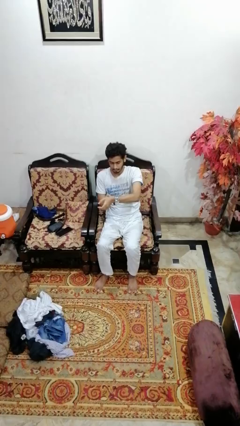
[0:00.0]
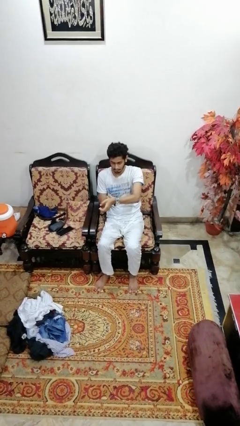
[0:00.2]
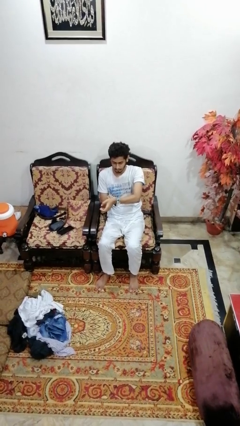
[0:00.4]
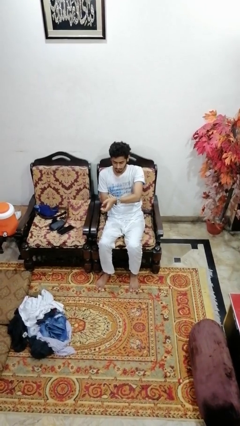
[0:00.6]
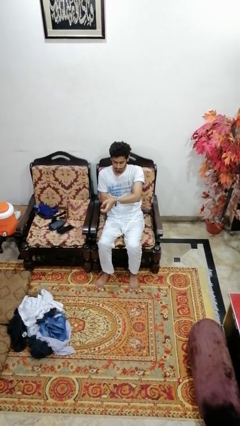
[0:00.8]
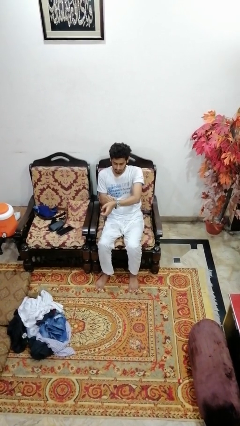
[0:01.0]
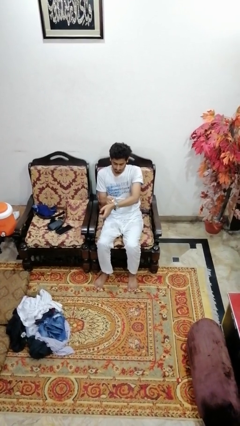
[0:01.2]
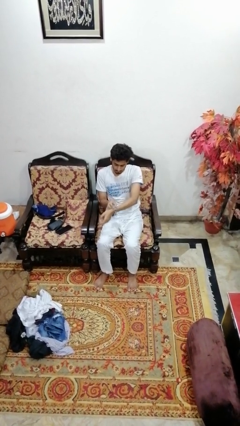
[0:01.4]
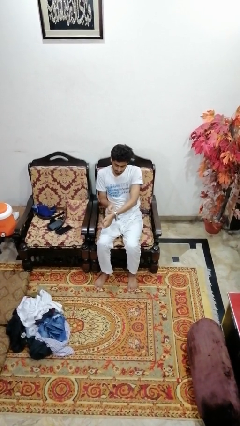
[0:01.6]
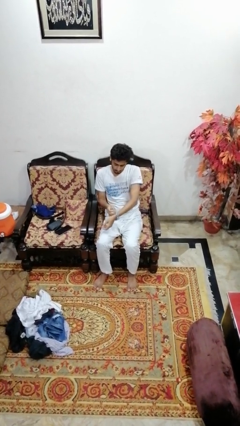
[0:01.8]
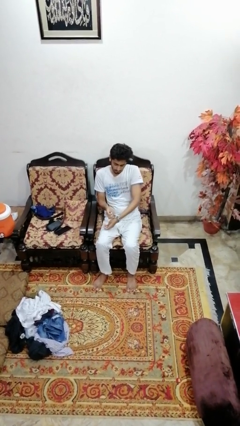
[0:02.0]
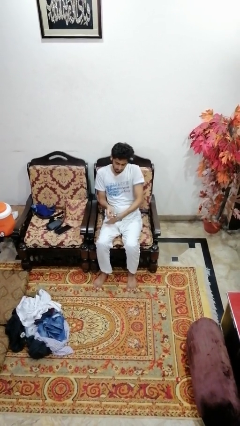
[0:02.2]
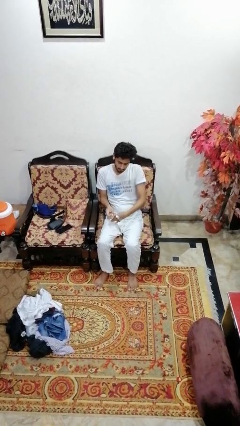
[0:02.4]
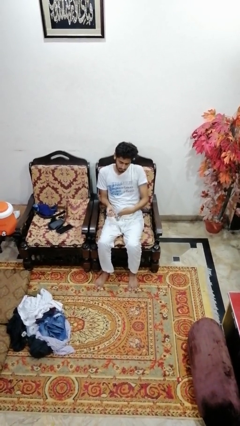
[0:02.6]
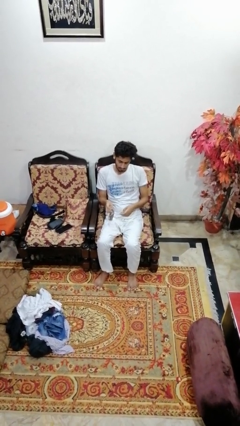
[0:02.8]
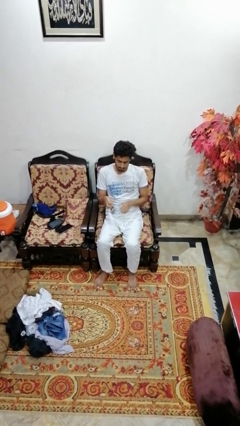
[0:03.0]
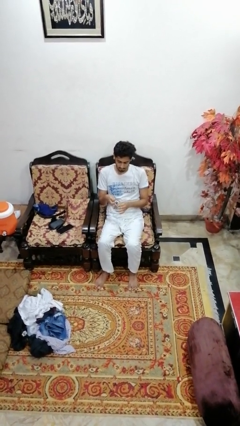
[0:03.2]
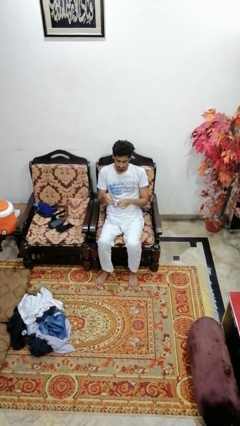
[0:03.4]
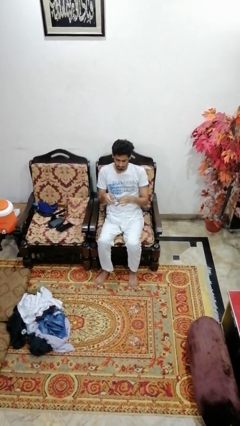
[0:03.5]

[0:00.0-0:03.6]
person takes off wristwatch

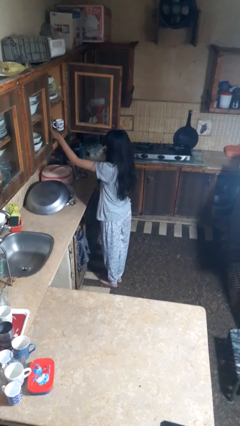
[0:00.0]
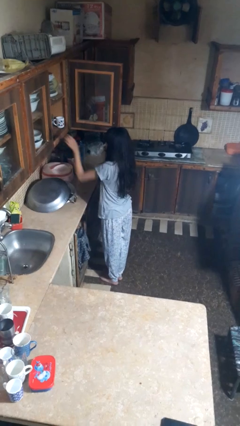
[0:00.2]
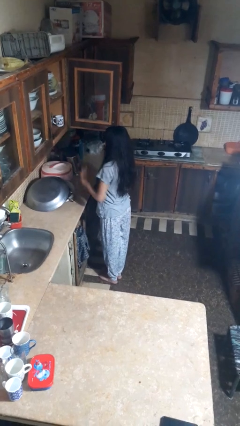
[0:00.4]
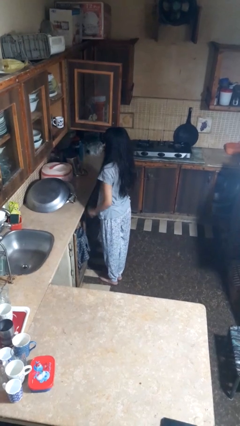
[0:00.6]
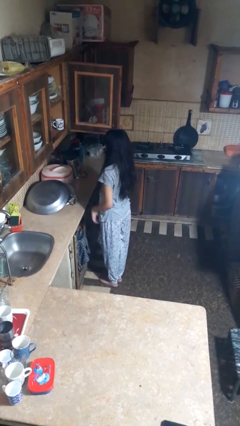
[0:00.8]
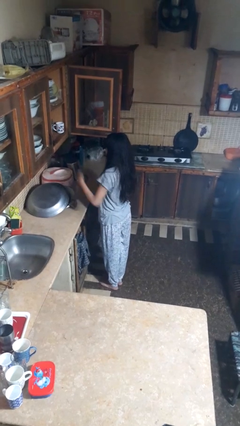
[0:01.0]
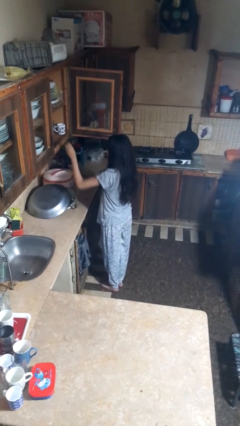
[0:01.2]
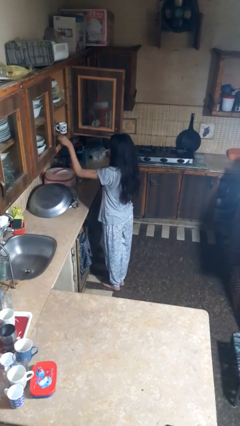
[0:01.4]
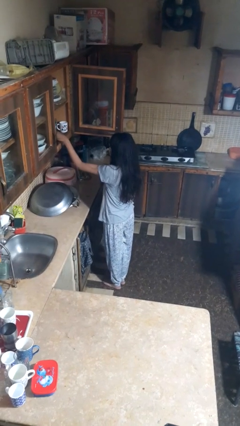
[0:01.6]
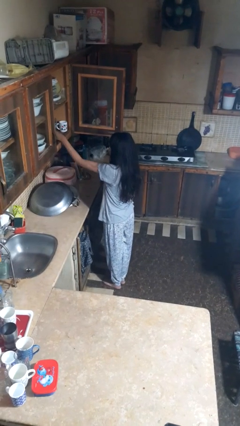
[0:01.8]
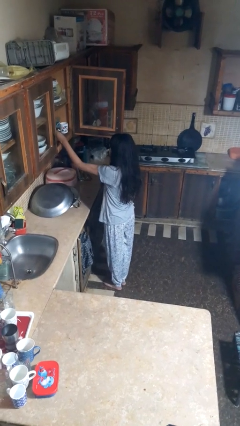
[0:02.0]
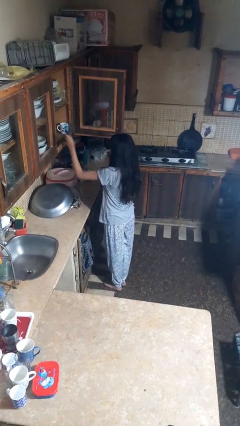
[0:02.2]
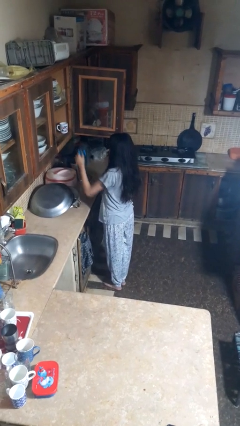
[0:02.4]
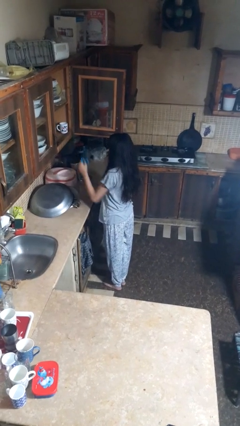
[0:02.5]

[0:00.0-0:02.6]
person takes object from cabinet

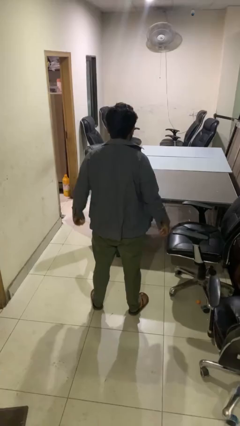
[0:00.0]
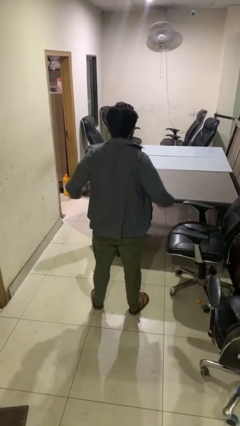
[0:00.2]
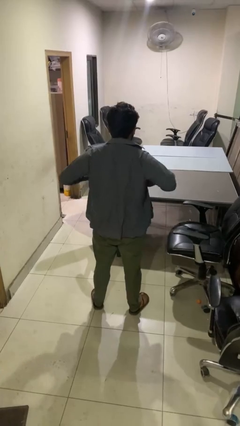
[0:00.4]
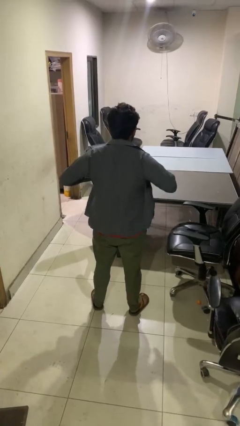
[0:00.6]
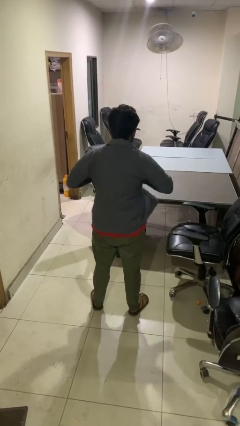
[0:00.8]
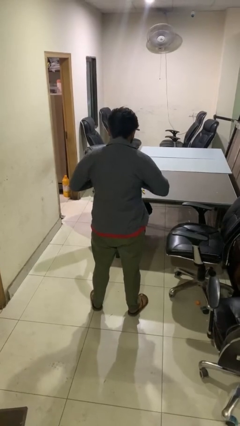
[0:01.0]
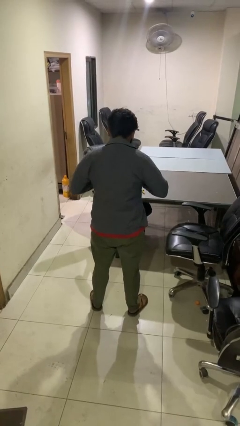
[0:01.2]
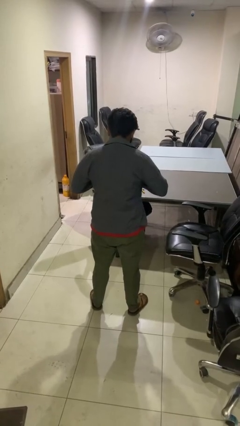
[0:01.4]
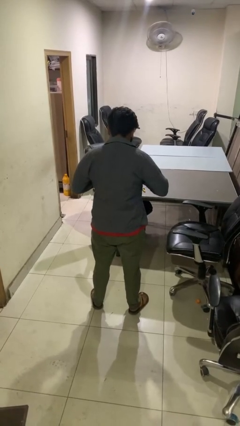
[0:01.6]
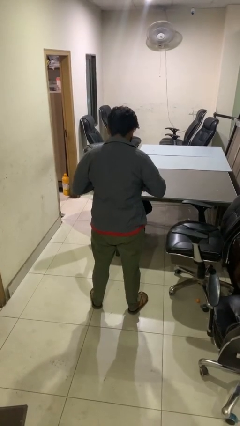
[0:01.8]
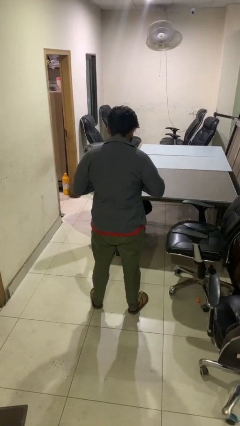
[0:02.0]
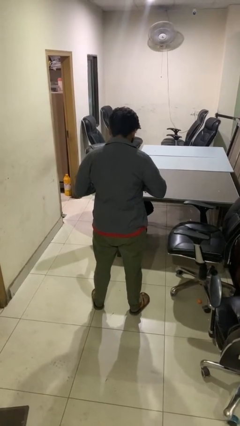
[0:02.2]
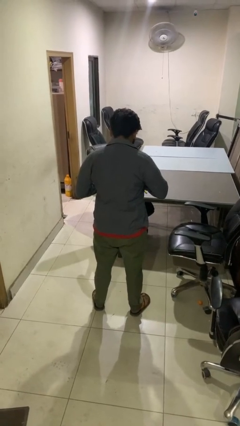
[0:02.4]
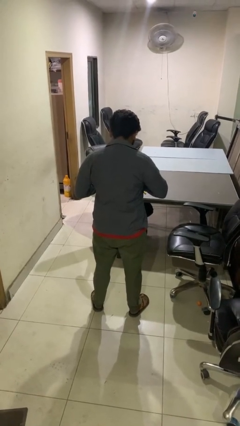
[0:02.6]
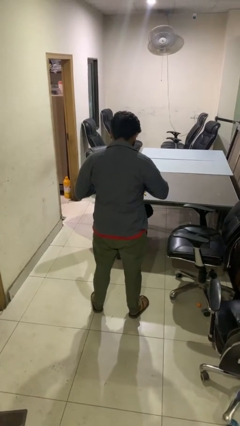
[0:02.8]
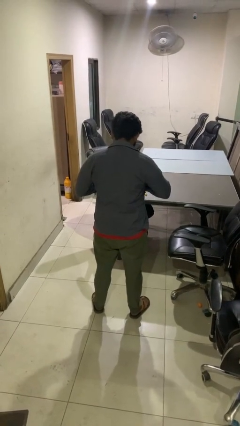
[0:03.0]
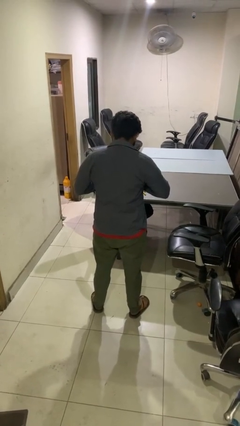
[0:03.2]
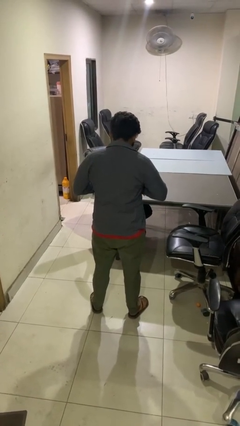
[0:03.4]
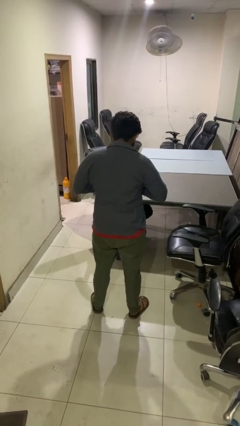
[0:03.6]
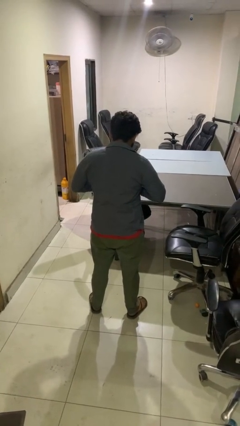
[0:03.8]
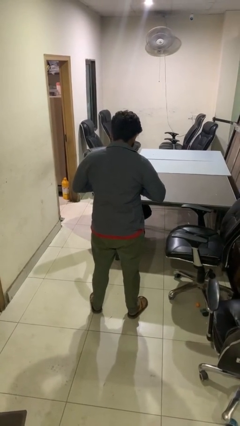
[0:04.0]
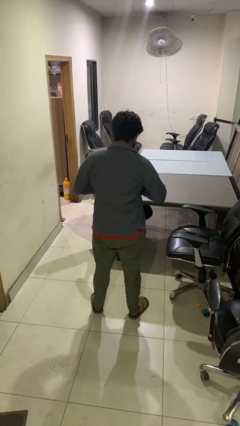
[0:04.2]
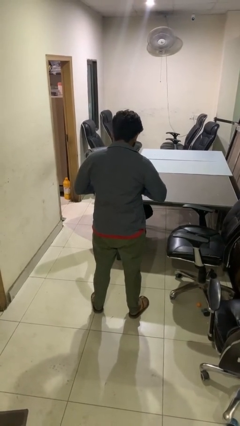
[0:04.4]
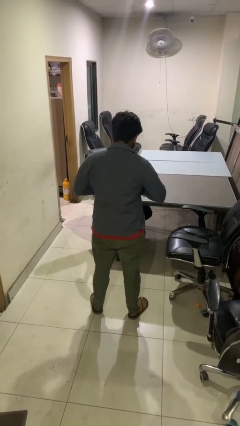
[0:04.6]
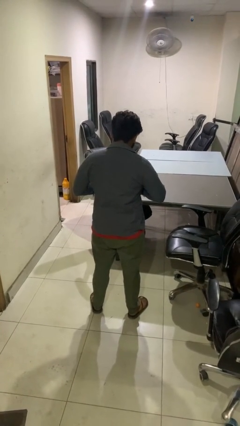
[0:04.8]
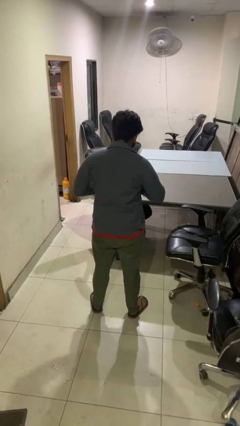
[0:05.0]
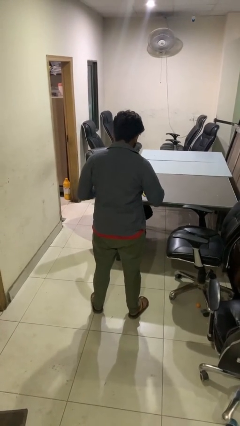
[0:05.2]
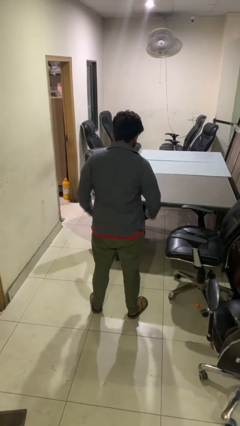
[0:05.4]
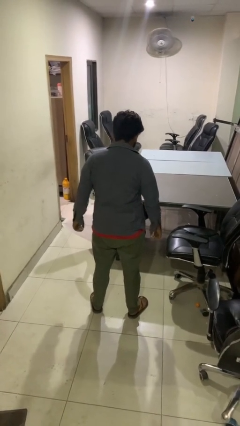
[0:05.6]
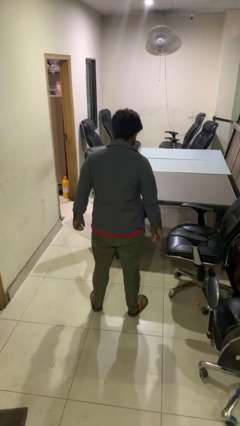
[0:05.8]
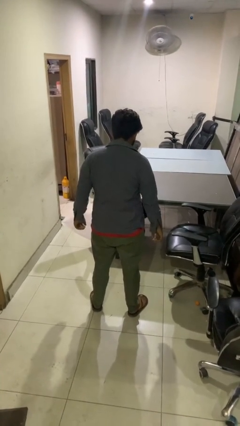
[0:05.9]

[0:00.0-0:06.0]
person buttons shirt

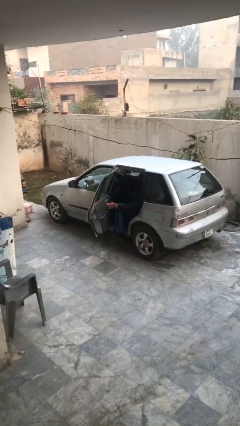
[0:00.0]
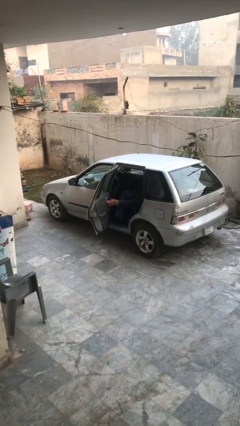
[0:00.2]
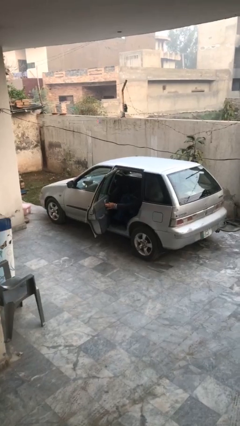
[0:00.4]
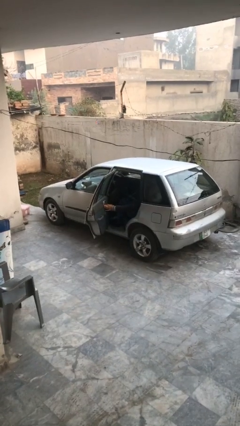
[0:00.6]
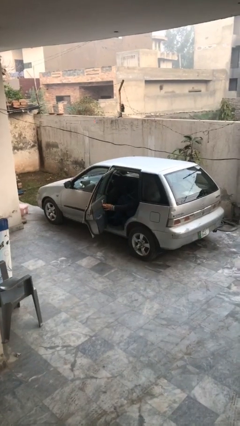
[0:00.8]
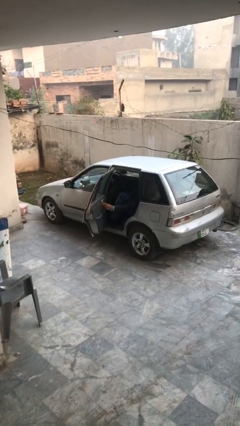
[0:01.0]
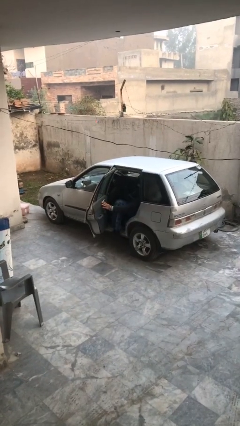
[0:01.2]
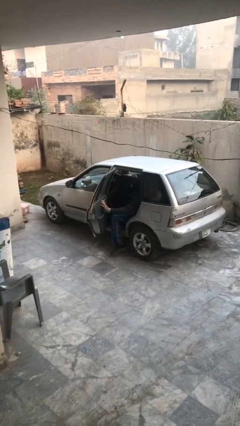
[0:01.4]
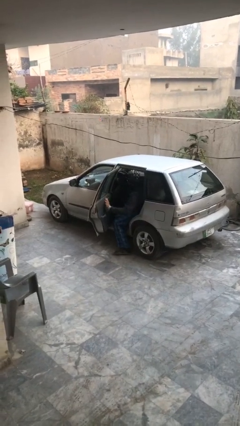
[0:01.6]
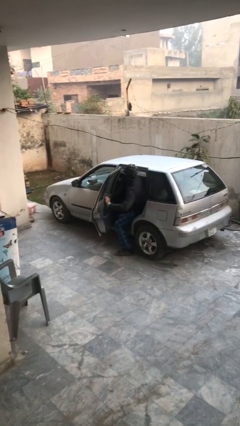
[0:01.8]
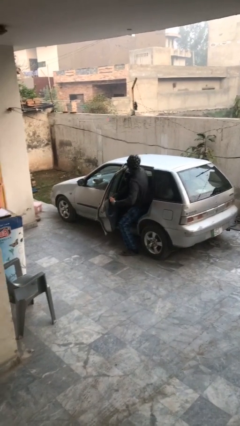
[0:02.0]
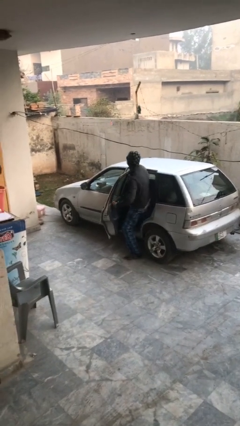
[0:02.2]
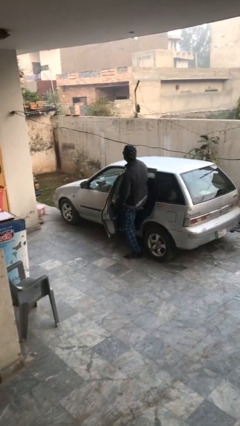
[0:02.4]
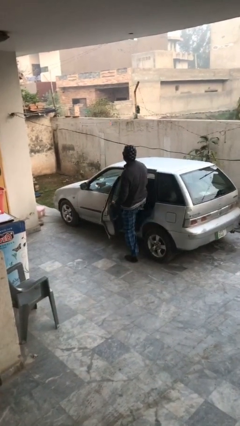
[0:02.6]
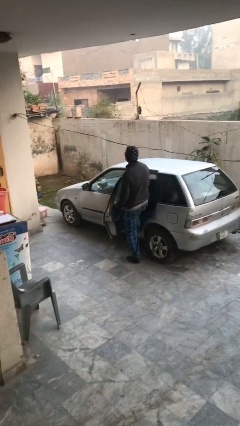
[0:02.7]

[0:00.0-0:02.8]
person exits car

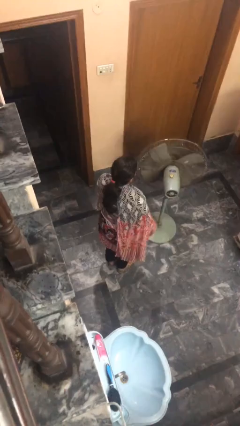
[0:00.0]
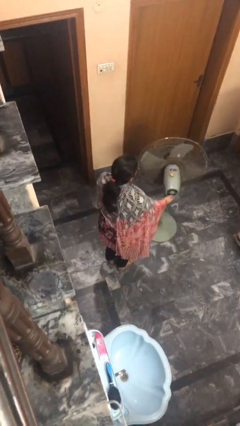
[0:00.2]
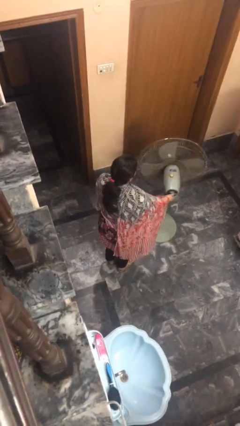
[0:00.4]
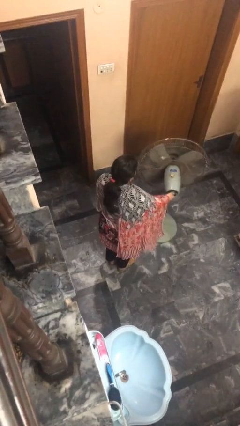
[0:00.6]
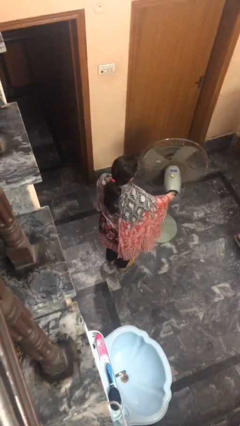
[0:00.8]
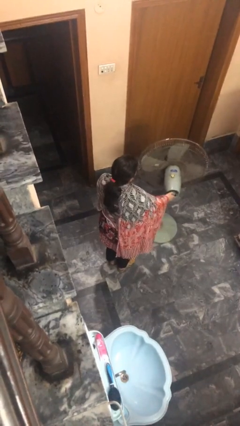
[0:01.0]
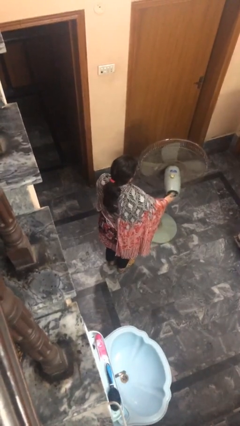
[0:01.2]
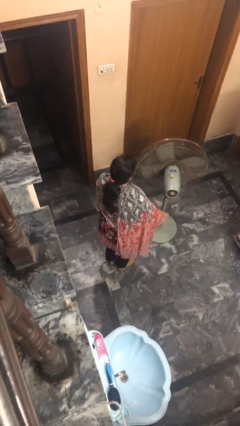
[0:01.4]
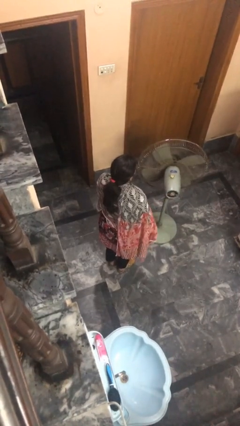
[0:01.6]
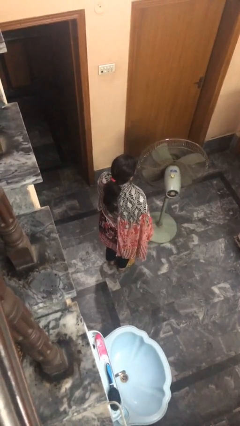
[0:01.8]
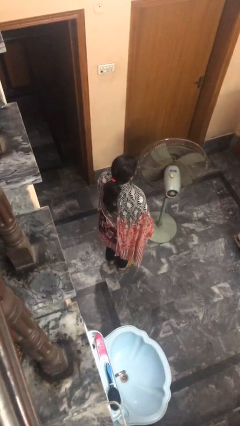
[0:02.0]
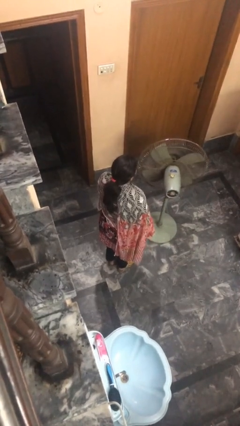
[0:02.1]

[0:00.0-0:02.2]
person turns off fan

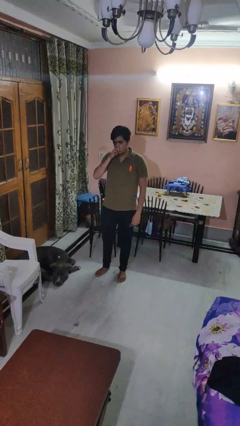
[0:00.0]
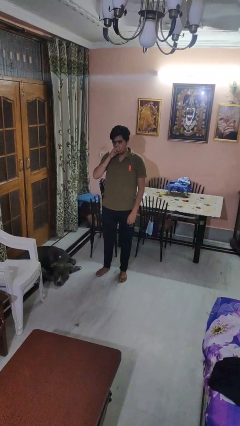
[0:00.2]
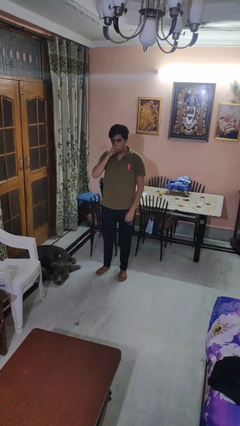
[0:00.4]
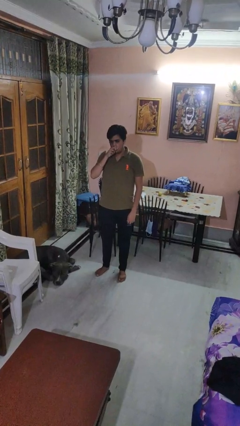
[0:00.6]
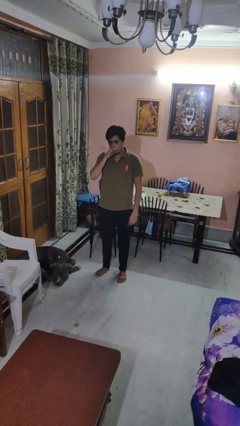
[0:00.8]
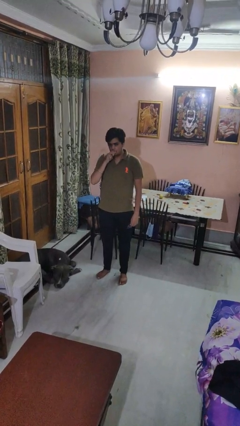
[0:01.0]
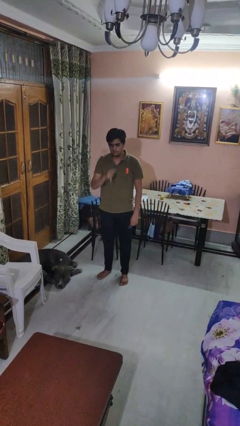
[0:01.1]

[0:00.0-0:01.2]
person vapes
